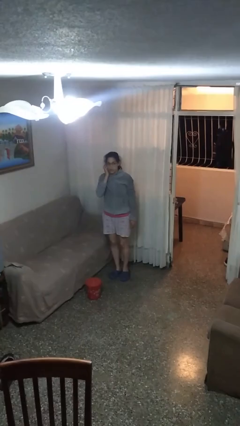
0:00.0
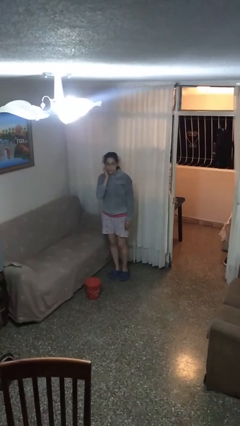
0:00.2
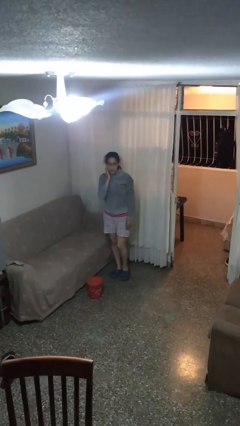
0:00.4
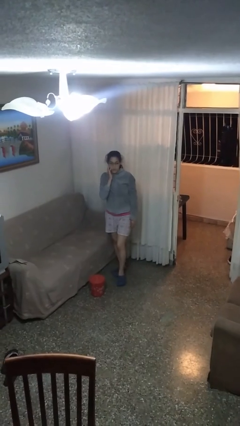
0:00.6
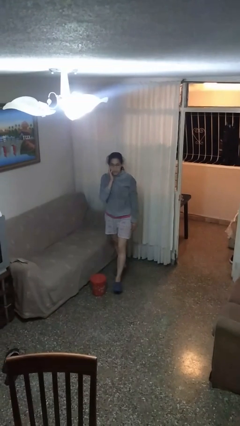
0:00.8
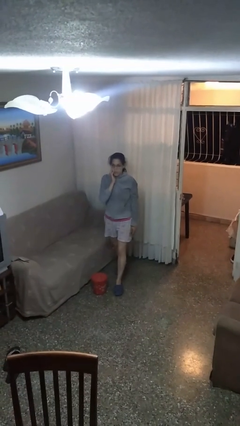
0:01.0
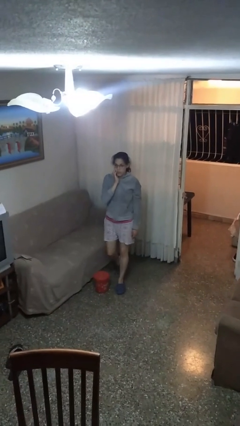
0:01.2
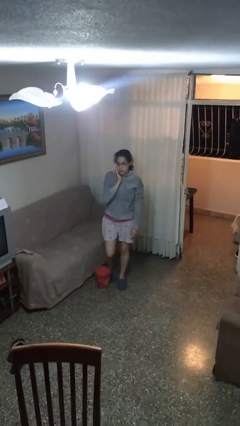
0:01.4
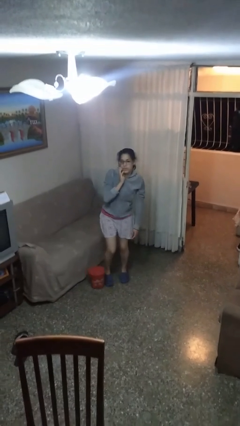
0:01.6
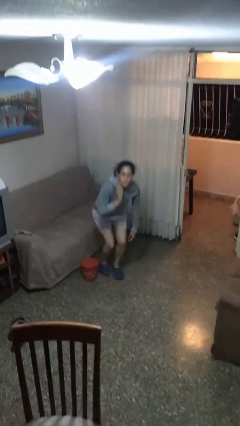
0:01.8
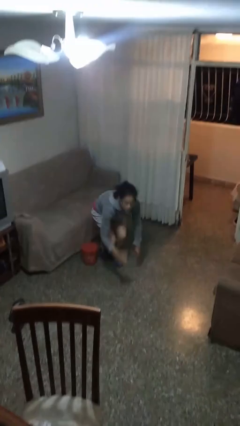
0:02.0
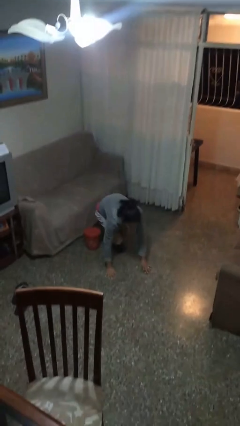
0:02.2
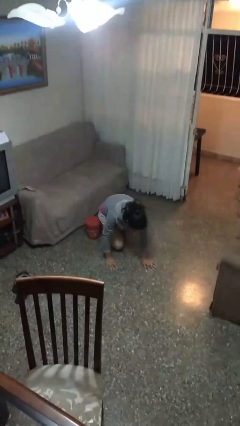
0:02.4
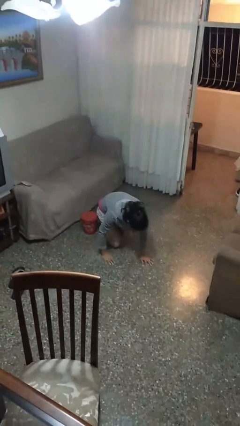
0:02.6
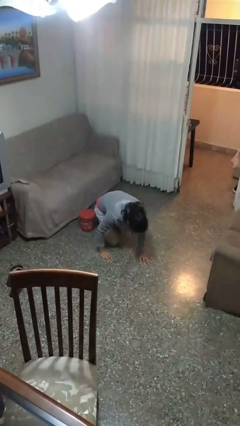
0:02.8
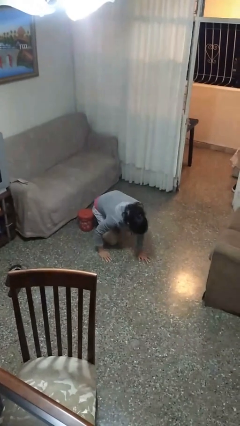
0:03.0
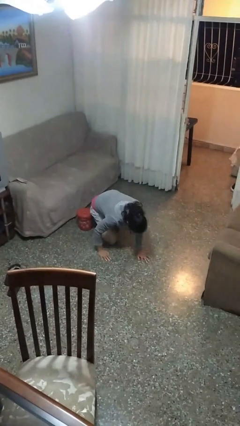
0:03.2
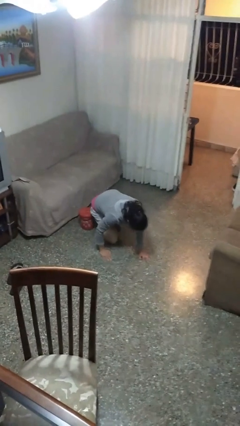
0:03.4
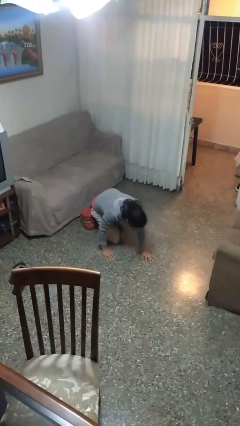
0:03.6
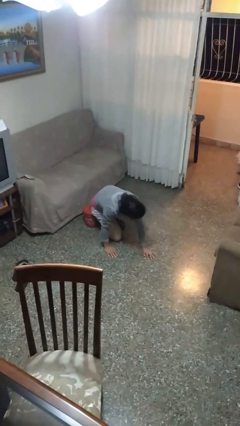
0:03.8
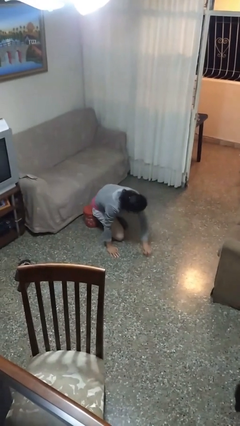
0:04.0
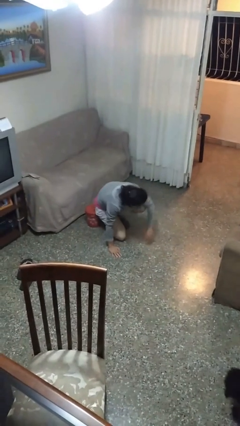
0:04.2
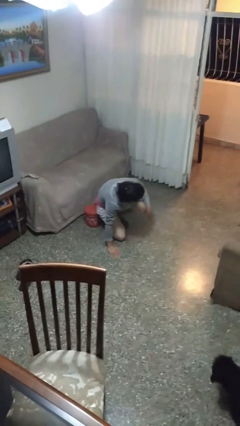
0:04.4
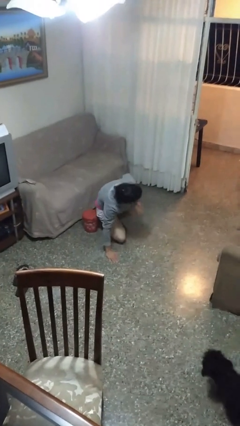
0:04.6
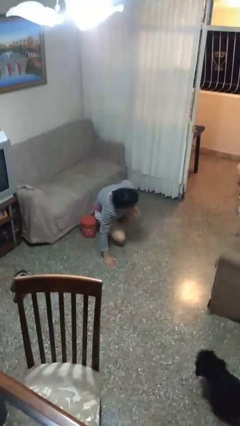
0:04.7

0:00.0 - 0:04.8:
person trips on object on floor

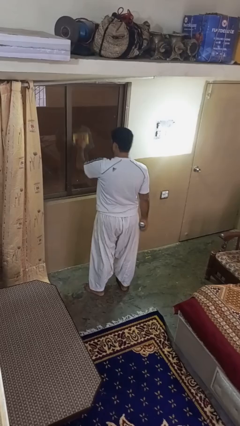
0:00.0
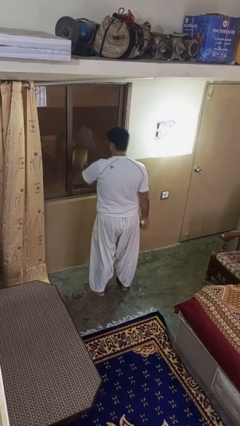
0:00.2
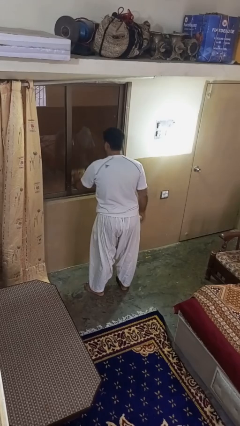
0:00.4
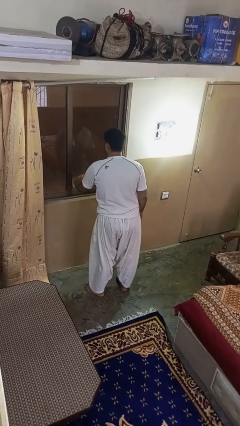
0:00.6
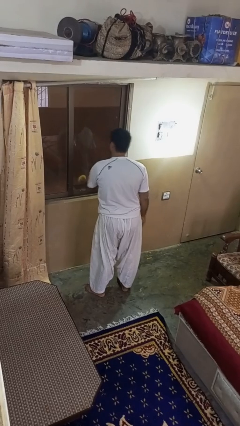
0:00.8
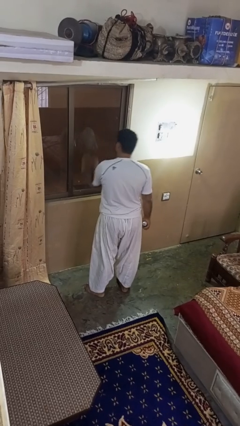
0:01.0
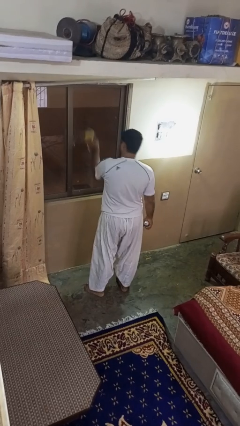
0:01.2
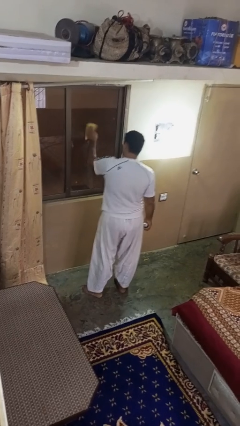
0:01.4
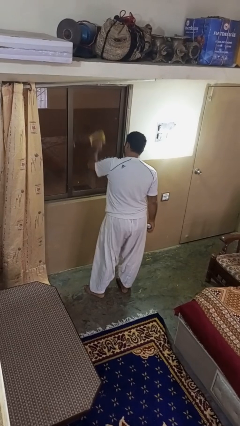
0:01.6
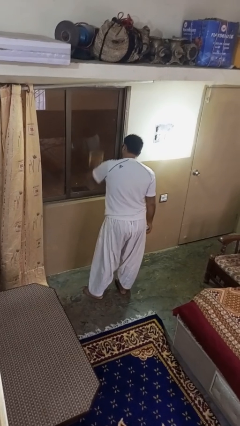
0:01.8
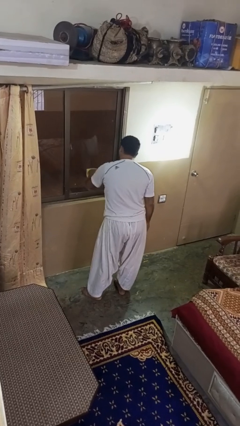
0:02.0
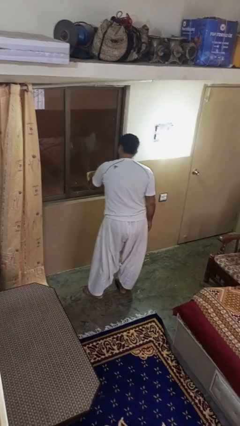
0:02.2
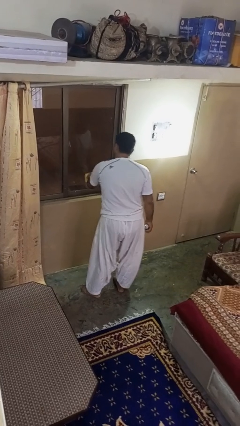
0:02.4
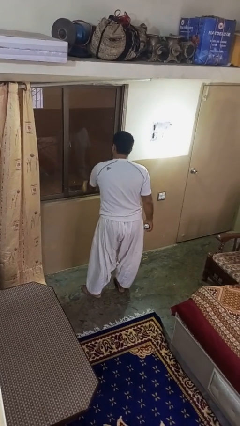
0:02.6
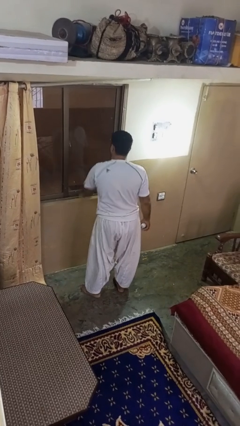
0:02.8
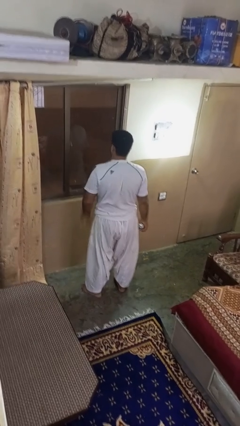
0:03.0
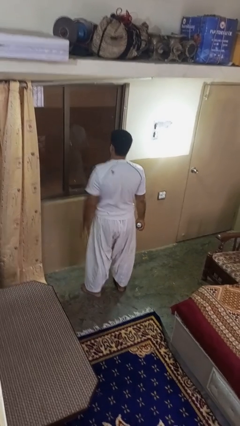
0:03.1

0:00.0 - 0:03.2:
person washes window

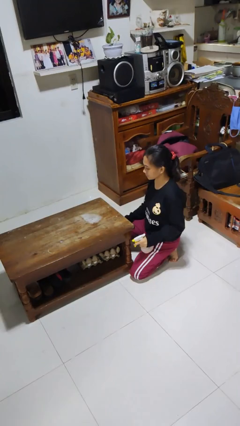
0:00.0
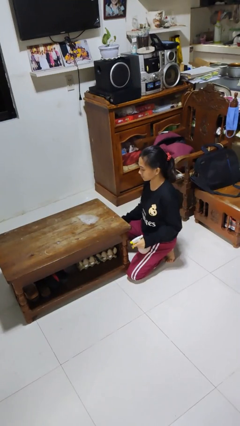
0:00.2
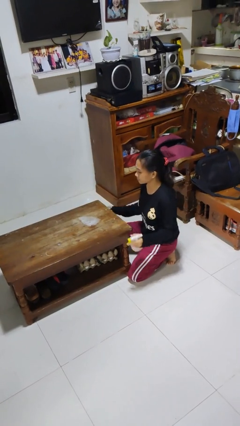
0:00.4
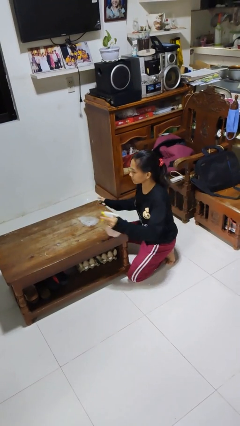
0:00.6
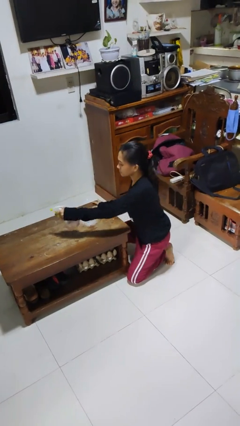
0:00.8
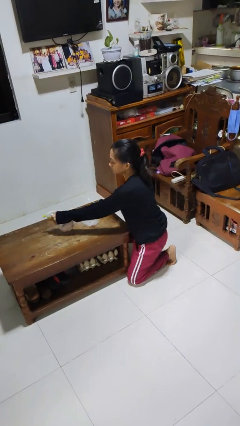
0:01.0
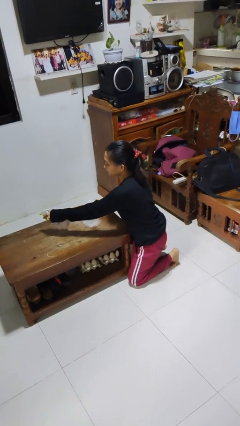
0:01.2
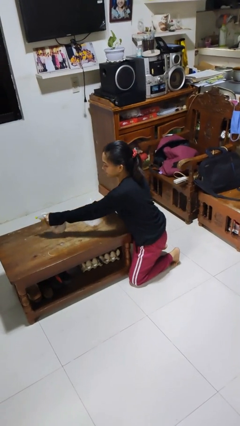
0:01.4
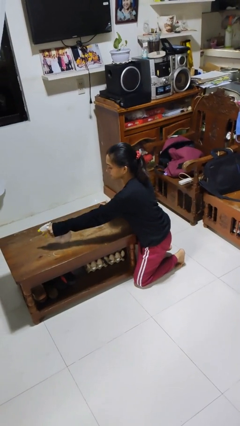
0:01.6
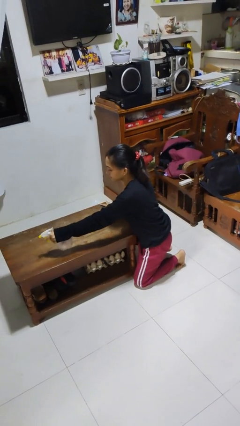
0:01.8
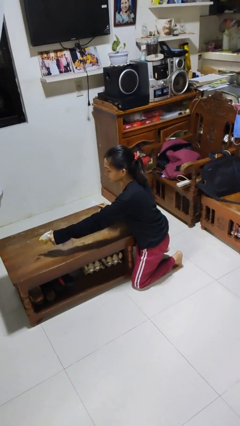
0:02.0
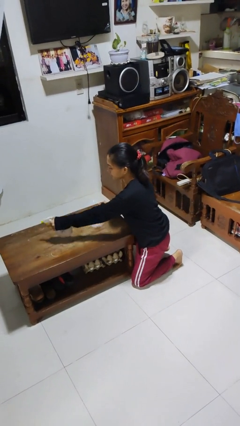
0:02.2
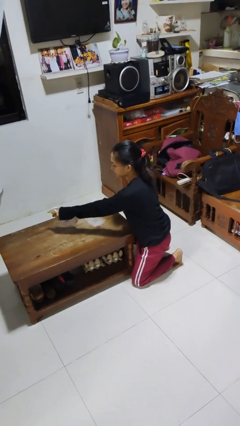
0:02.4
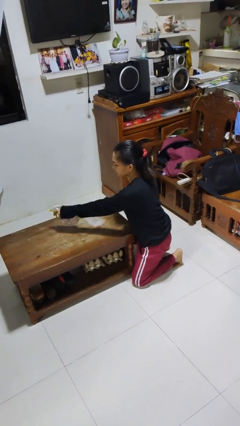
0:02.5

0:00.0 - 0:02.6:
person sprays from bottle

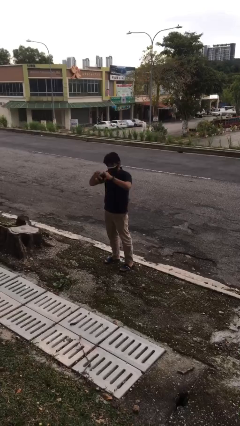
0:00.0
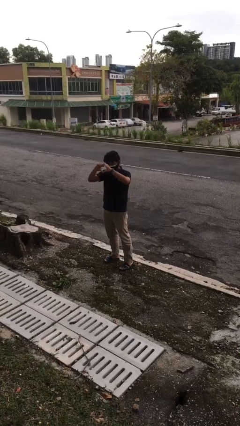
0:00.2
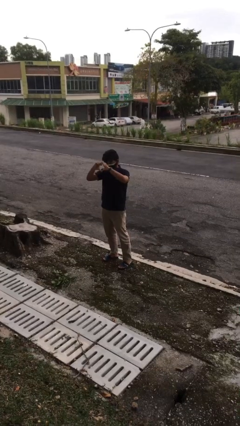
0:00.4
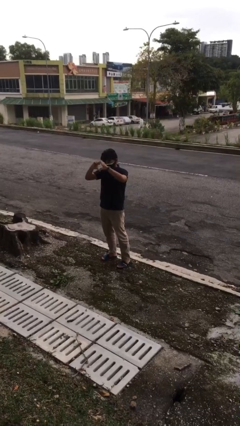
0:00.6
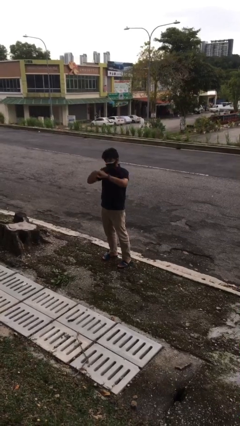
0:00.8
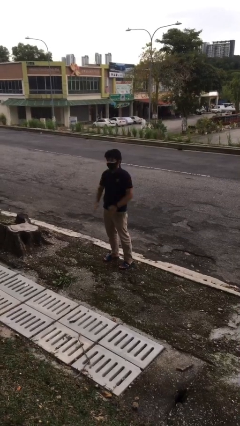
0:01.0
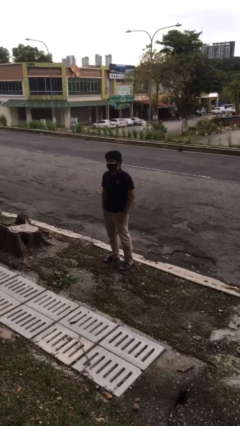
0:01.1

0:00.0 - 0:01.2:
person gestures heart

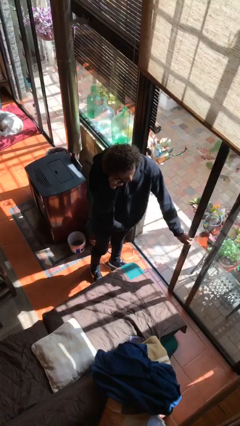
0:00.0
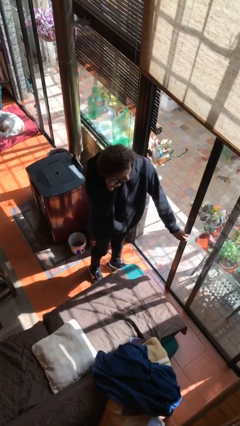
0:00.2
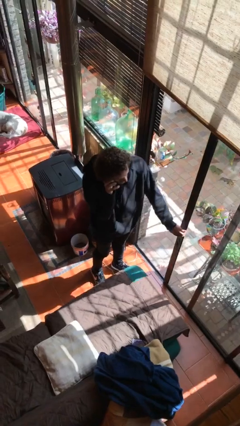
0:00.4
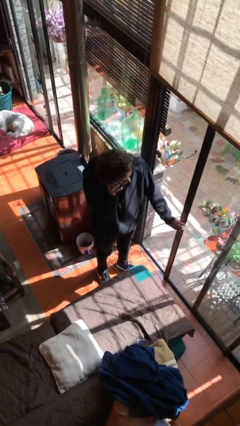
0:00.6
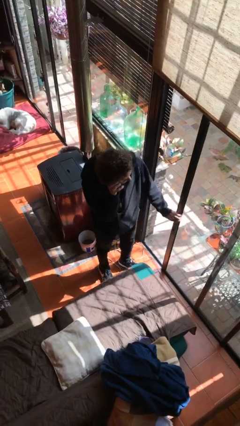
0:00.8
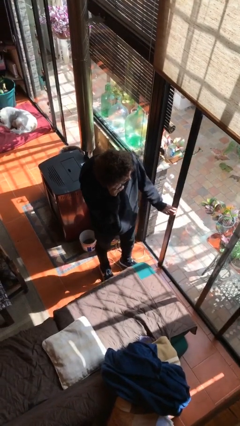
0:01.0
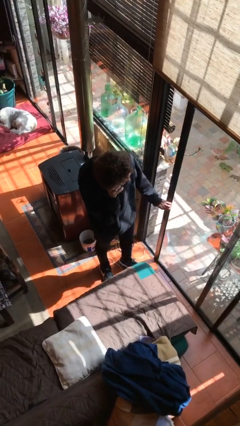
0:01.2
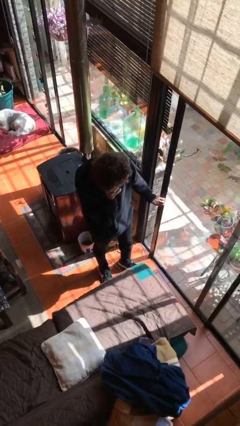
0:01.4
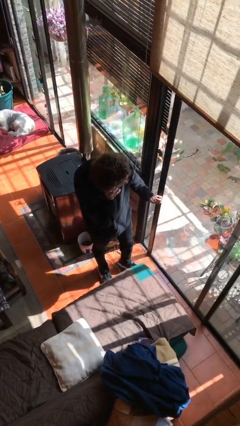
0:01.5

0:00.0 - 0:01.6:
person closes facility door

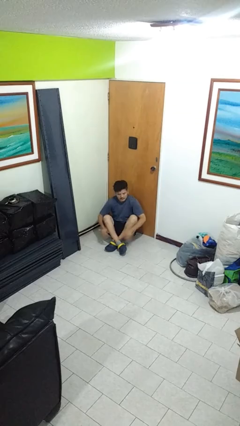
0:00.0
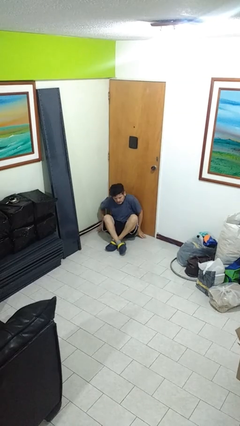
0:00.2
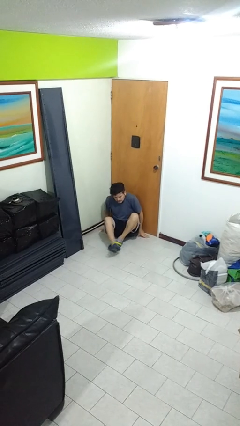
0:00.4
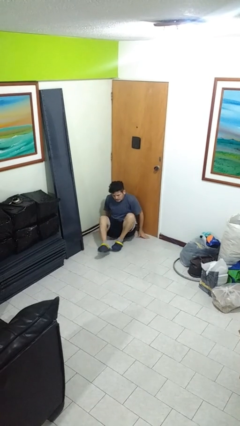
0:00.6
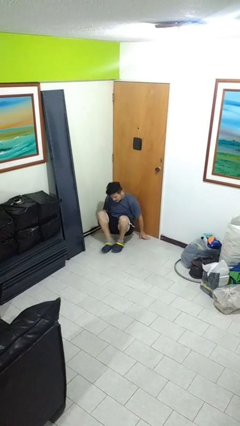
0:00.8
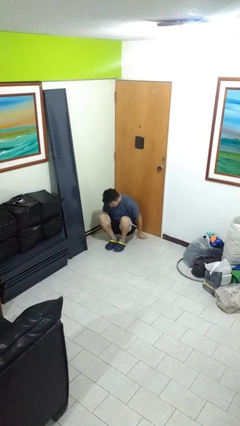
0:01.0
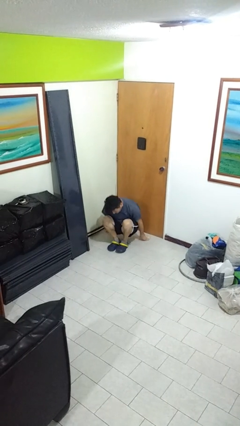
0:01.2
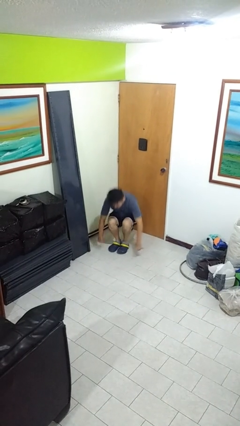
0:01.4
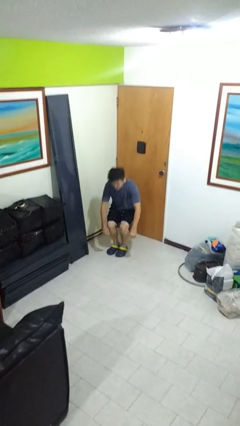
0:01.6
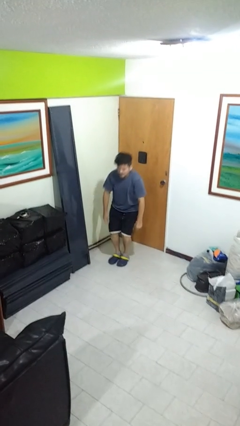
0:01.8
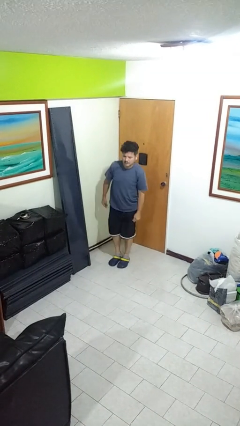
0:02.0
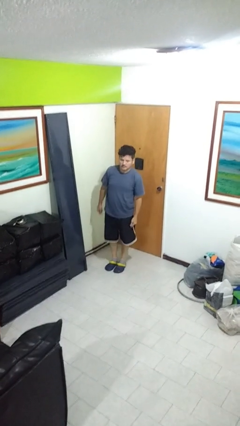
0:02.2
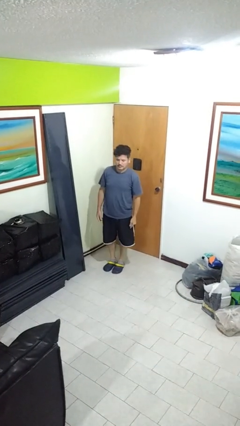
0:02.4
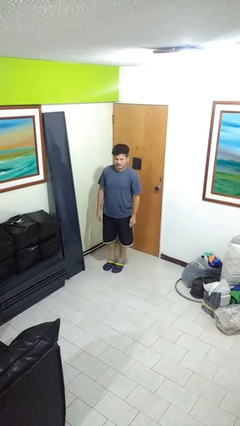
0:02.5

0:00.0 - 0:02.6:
person stands up from floor

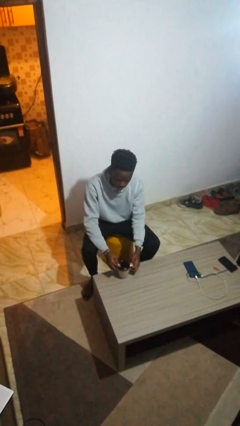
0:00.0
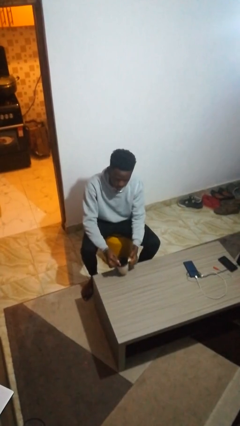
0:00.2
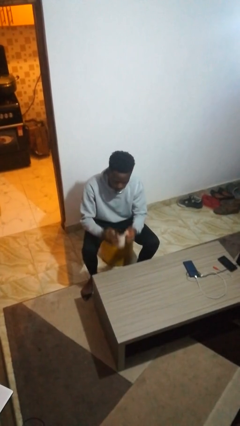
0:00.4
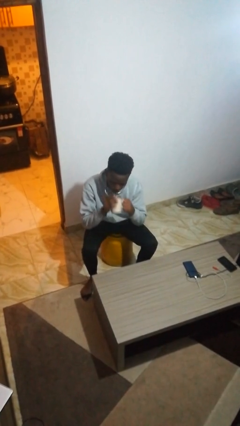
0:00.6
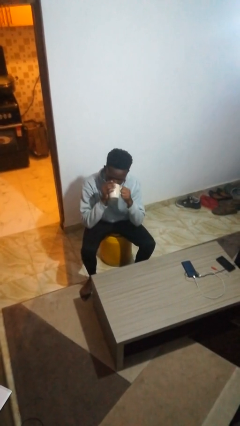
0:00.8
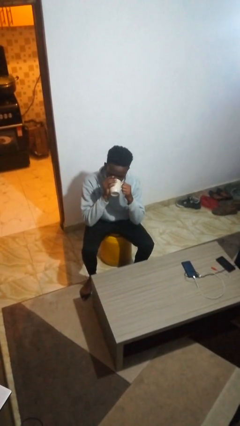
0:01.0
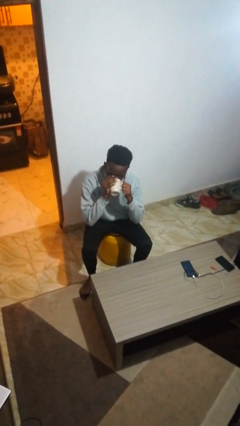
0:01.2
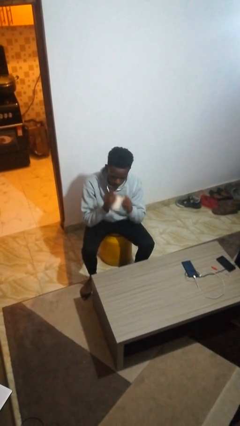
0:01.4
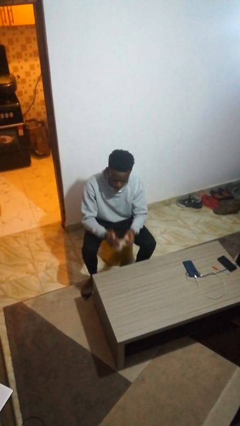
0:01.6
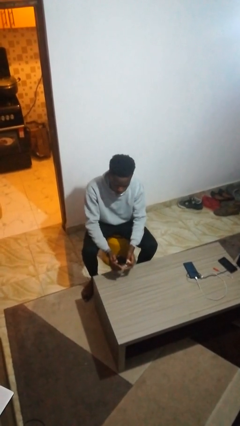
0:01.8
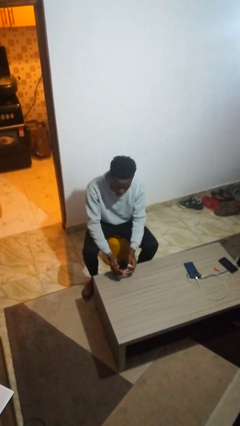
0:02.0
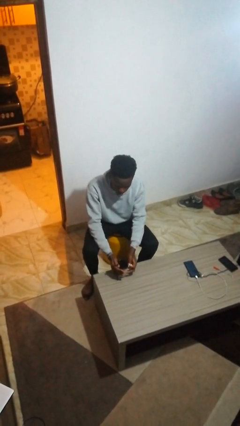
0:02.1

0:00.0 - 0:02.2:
person drinks from mug
